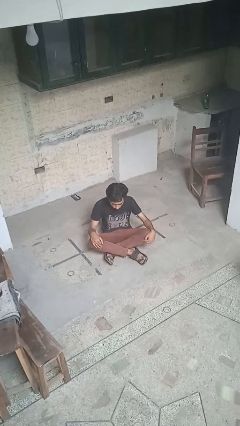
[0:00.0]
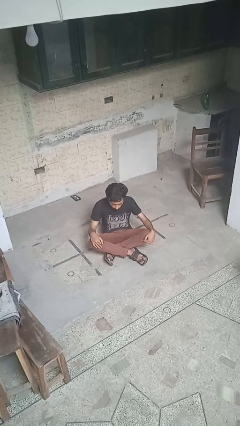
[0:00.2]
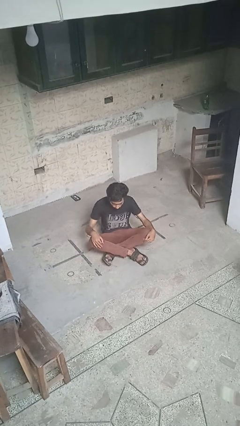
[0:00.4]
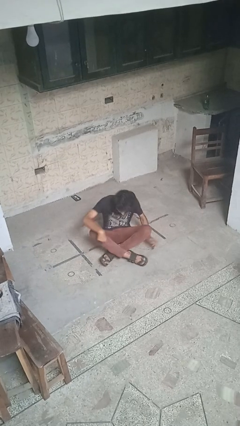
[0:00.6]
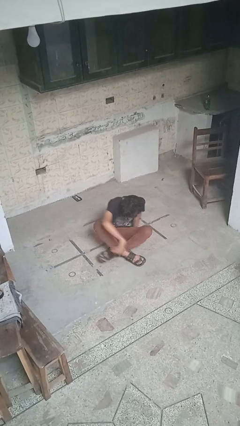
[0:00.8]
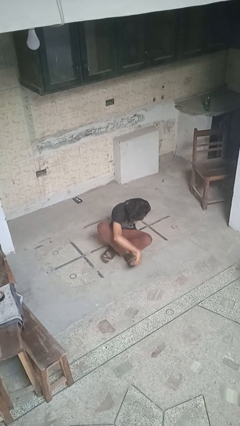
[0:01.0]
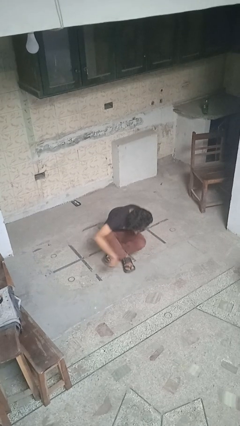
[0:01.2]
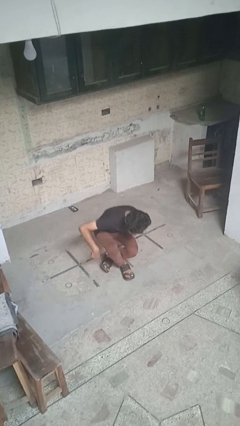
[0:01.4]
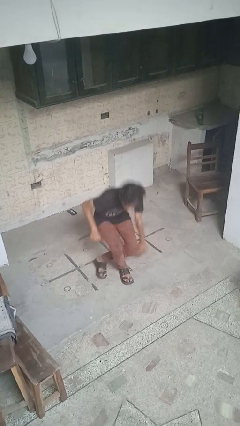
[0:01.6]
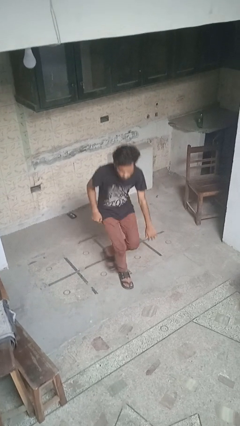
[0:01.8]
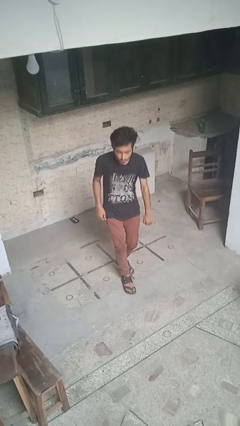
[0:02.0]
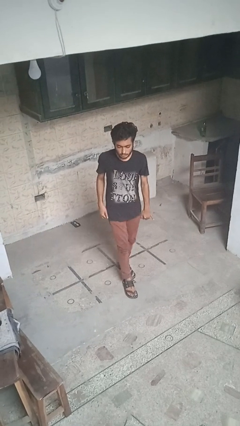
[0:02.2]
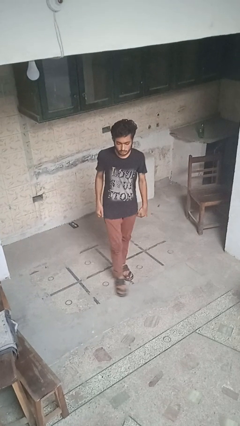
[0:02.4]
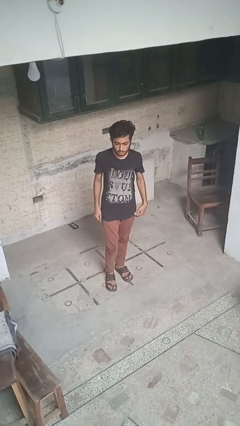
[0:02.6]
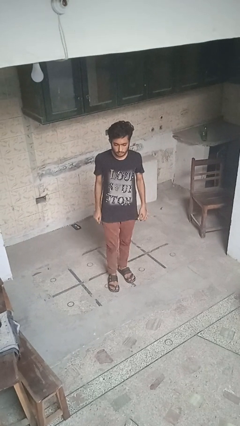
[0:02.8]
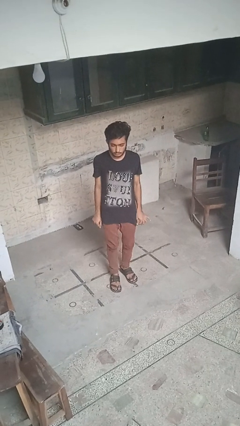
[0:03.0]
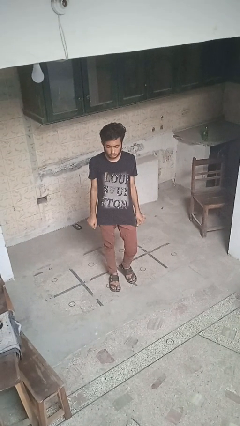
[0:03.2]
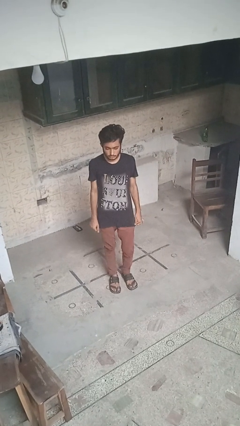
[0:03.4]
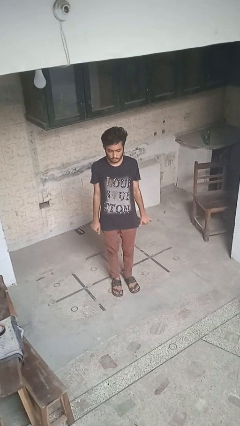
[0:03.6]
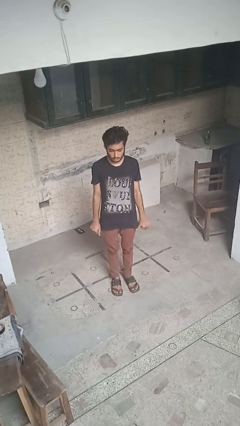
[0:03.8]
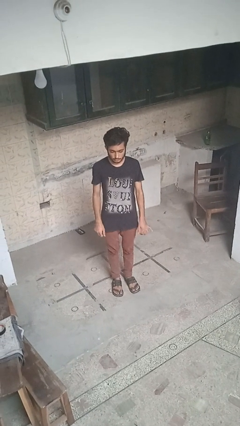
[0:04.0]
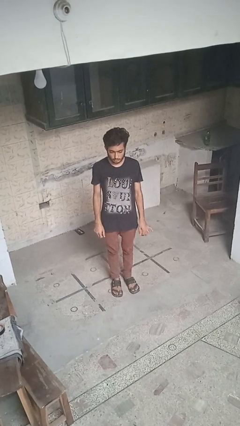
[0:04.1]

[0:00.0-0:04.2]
person stands up from floor

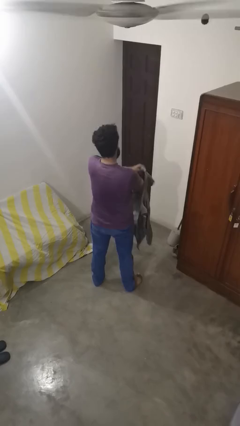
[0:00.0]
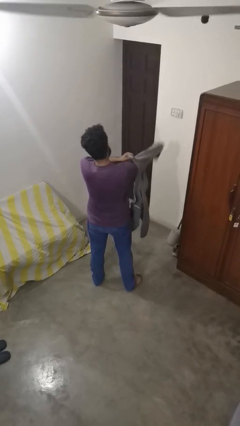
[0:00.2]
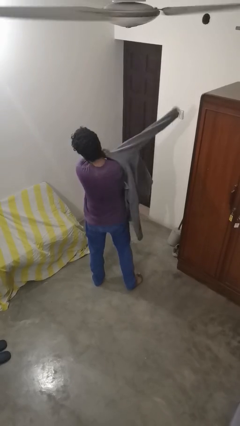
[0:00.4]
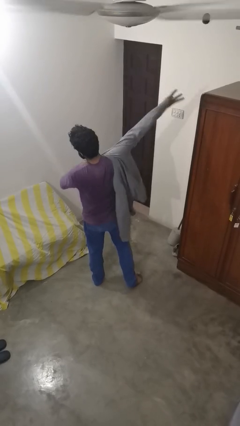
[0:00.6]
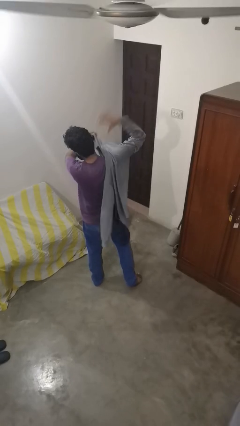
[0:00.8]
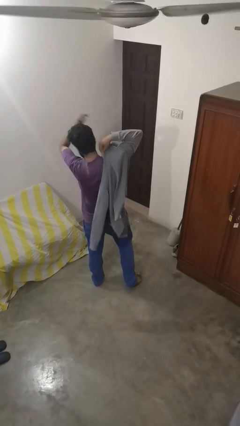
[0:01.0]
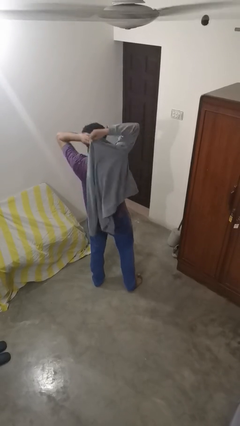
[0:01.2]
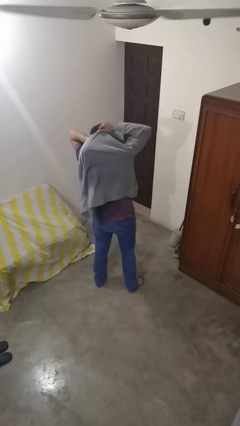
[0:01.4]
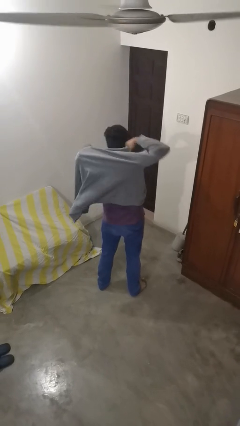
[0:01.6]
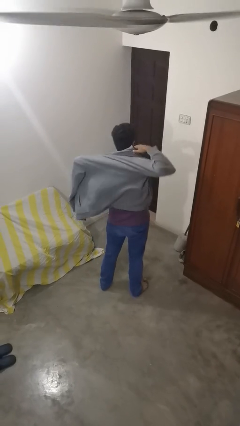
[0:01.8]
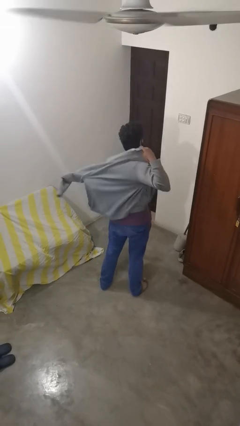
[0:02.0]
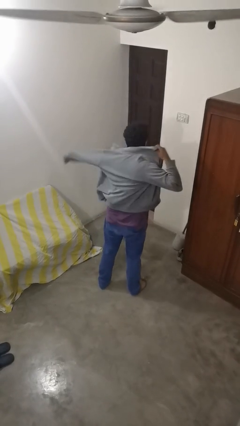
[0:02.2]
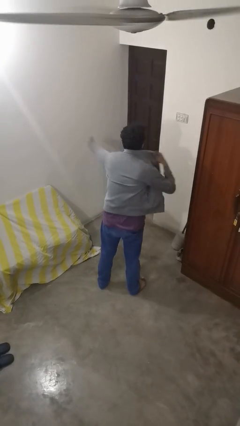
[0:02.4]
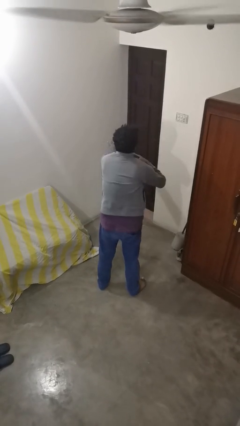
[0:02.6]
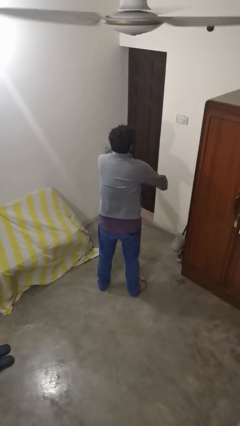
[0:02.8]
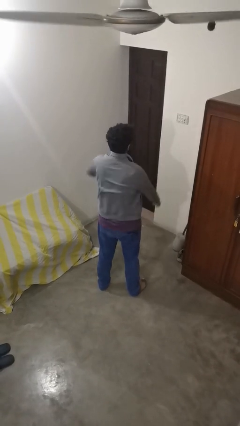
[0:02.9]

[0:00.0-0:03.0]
person puts on jacket

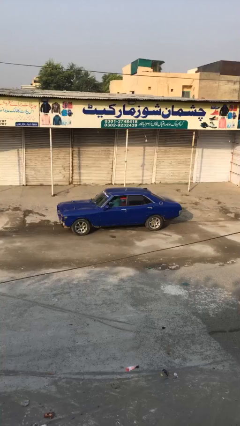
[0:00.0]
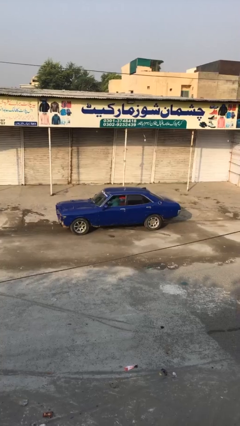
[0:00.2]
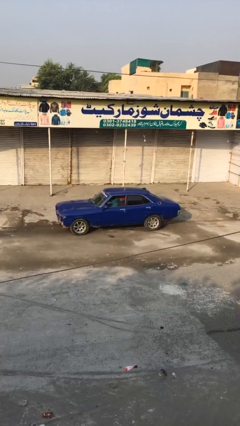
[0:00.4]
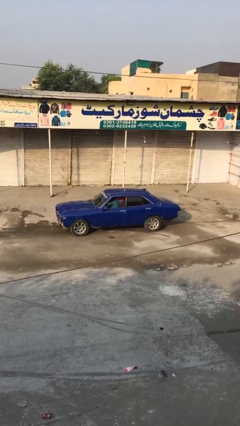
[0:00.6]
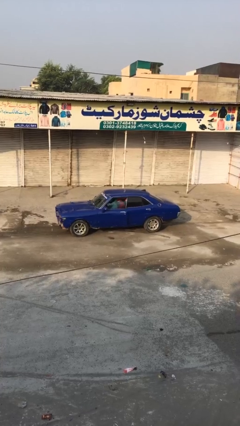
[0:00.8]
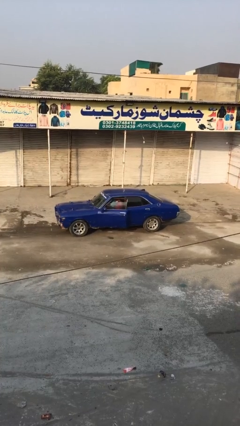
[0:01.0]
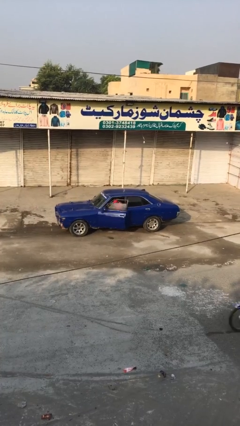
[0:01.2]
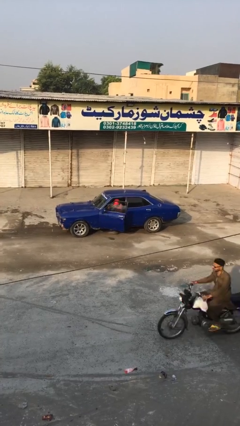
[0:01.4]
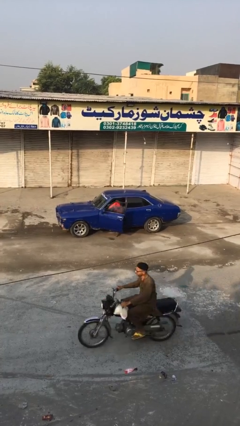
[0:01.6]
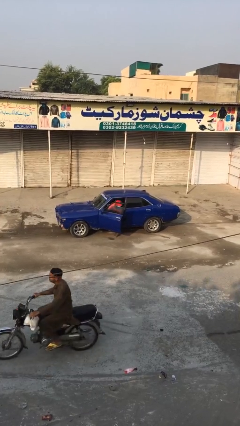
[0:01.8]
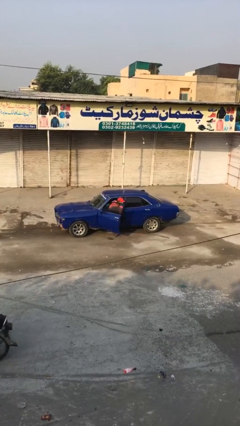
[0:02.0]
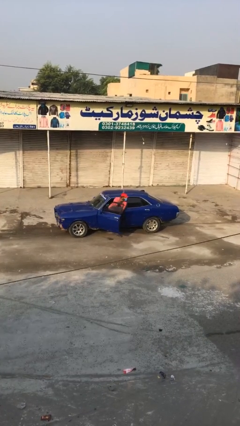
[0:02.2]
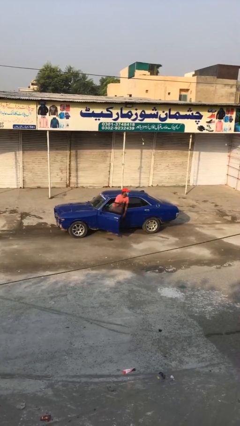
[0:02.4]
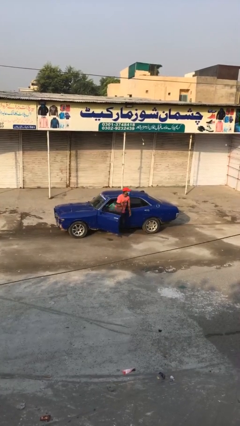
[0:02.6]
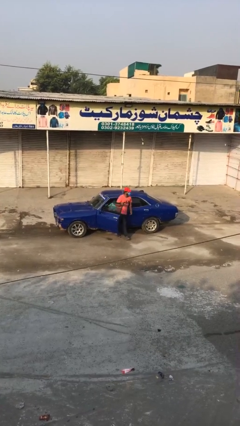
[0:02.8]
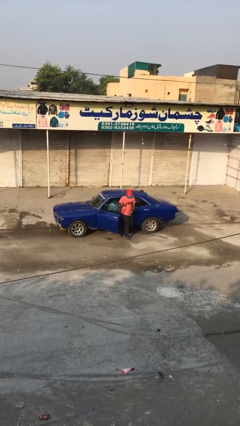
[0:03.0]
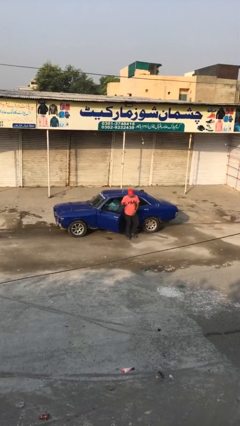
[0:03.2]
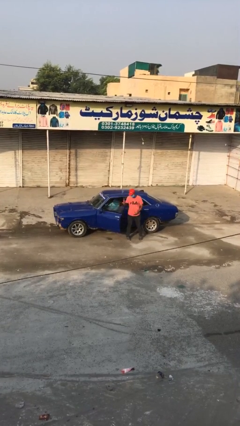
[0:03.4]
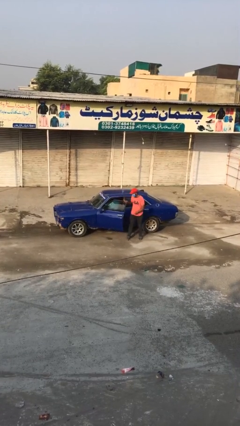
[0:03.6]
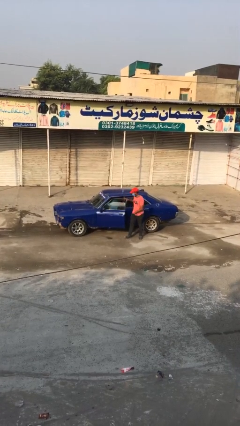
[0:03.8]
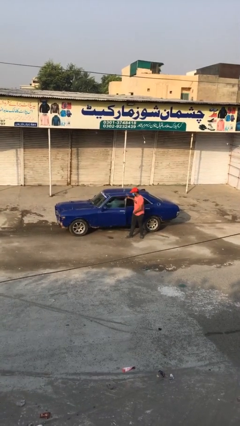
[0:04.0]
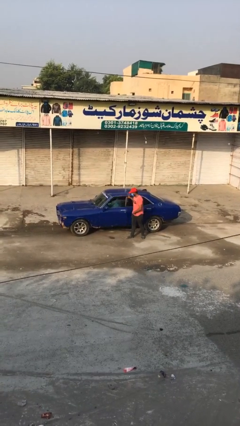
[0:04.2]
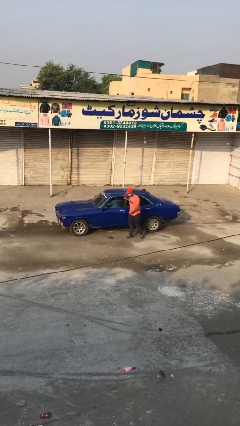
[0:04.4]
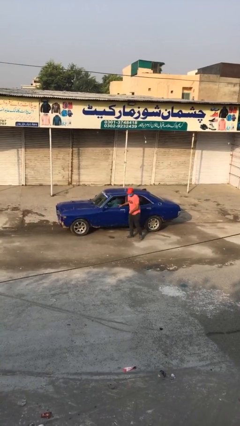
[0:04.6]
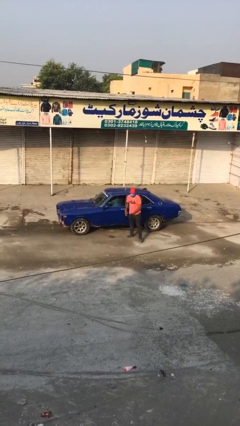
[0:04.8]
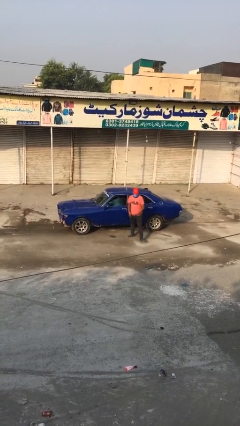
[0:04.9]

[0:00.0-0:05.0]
car drops off person

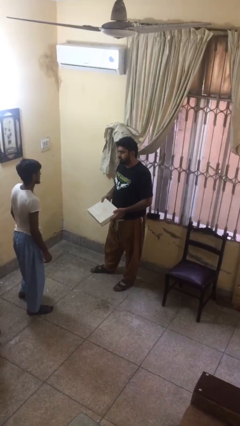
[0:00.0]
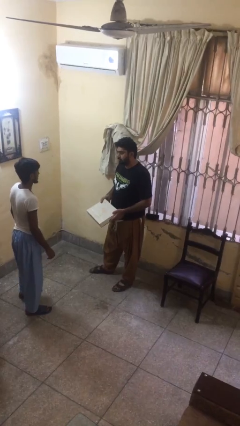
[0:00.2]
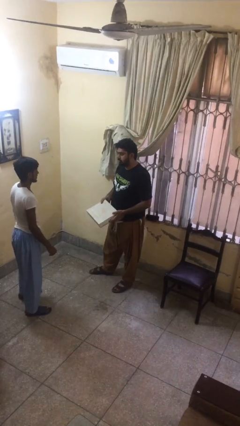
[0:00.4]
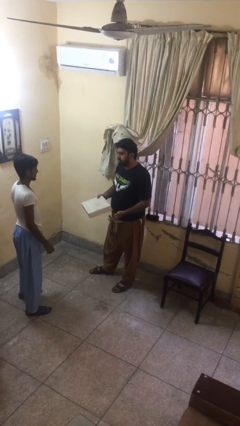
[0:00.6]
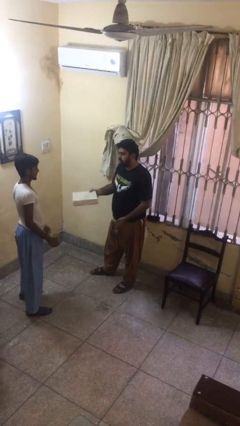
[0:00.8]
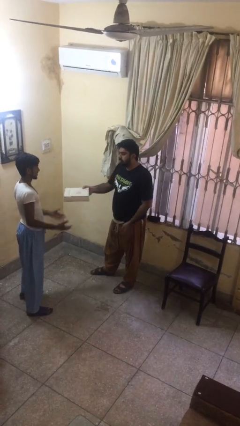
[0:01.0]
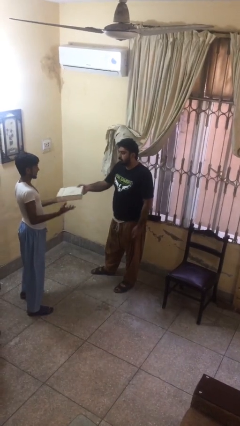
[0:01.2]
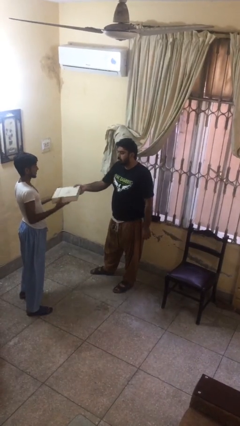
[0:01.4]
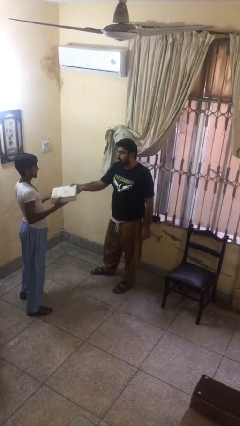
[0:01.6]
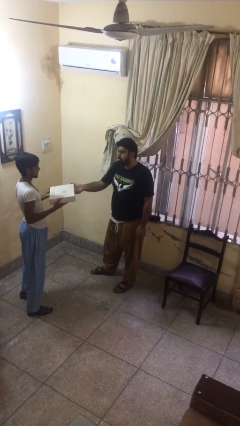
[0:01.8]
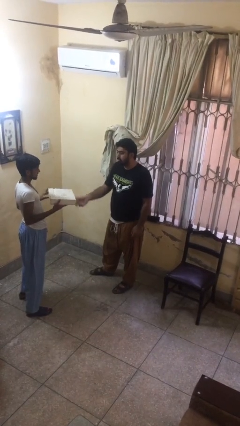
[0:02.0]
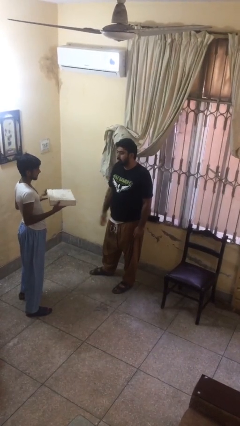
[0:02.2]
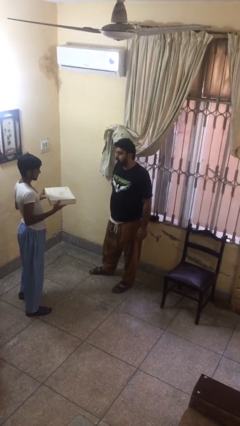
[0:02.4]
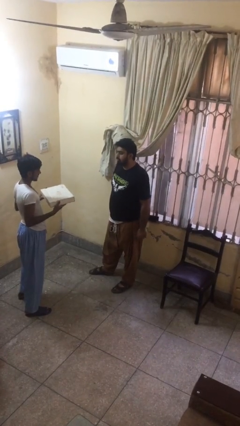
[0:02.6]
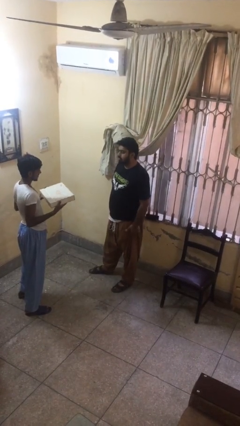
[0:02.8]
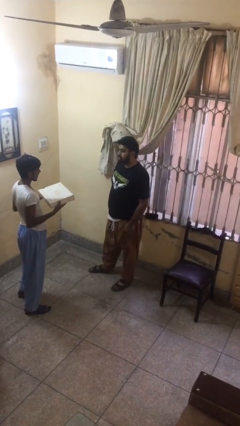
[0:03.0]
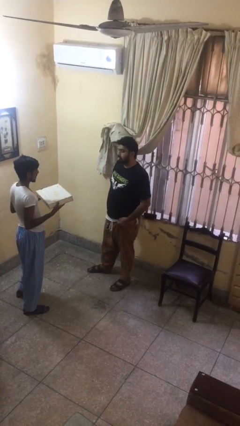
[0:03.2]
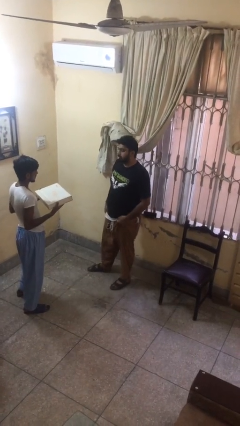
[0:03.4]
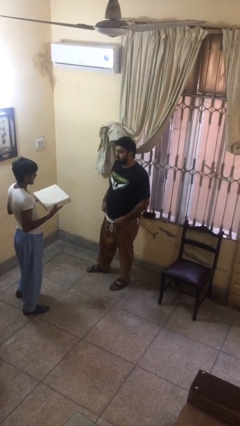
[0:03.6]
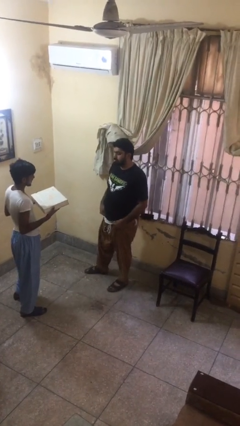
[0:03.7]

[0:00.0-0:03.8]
person transfers object to person

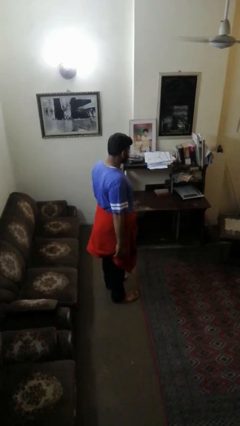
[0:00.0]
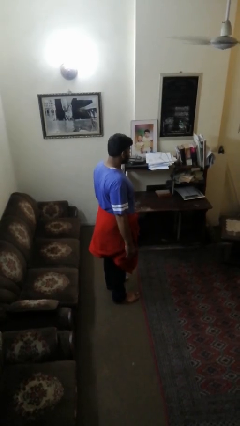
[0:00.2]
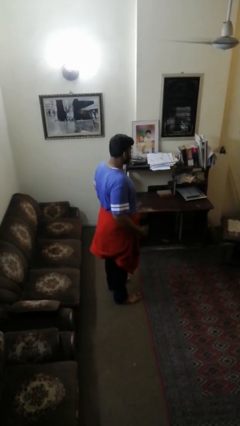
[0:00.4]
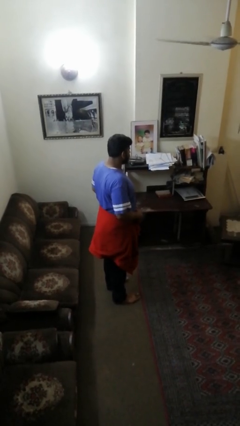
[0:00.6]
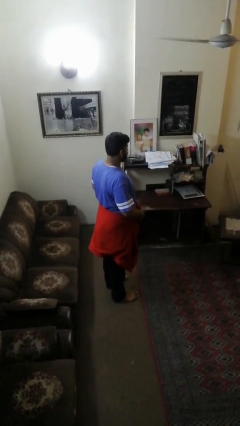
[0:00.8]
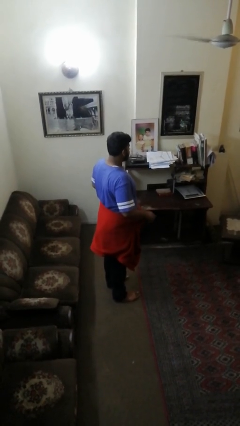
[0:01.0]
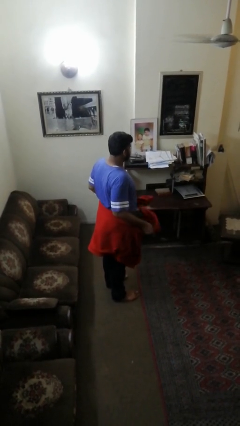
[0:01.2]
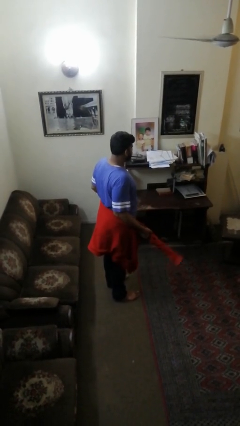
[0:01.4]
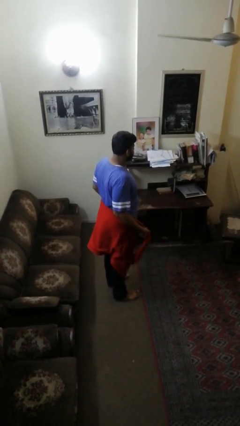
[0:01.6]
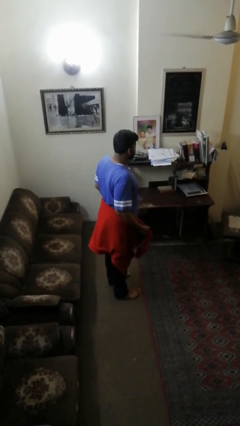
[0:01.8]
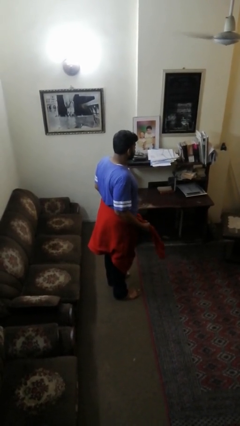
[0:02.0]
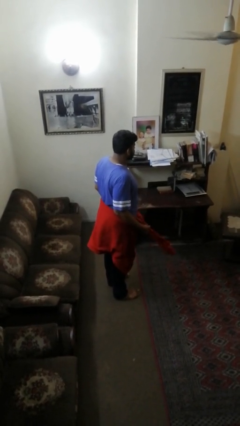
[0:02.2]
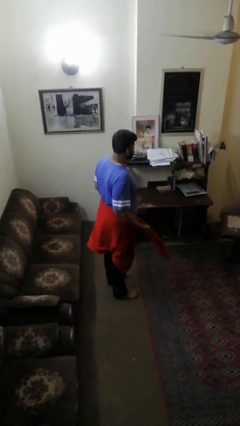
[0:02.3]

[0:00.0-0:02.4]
person unties jacket around waist
